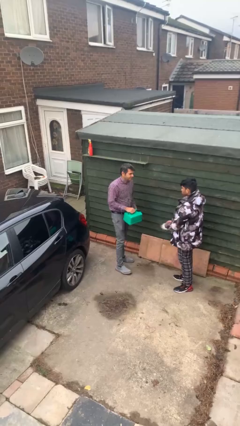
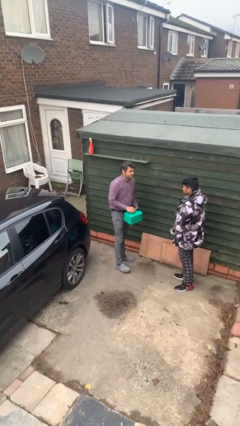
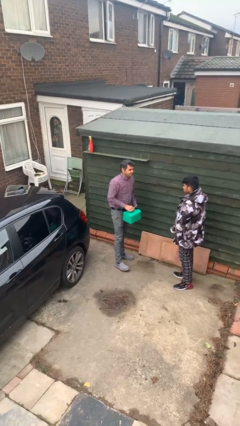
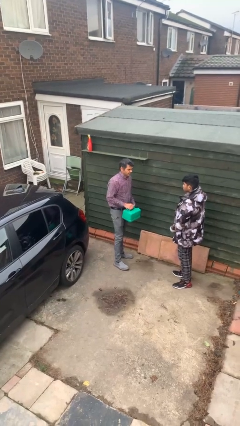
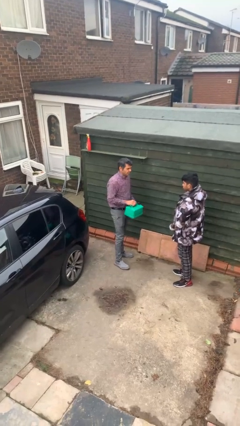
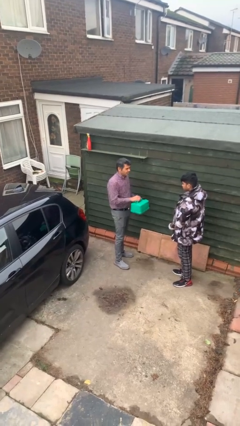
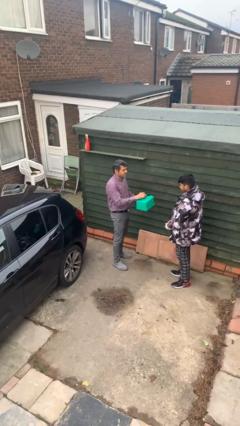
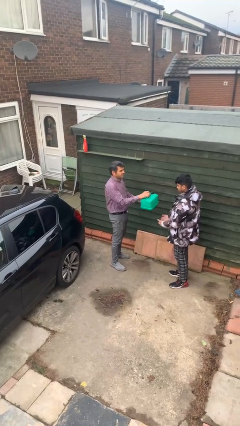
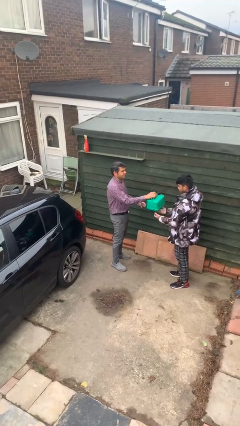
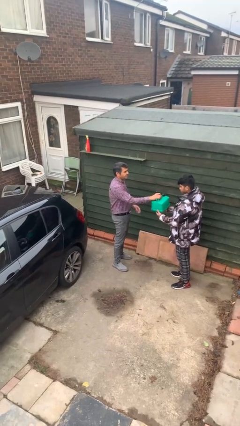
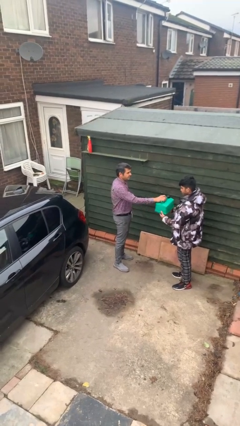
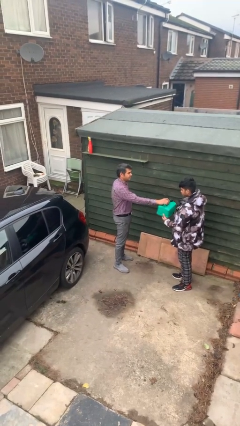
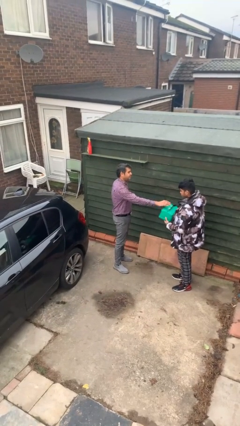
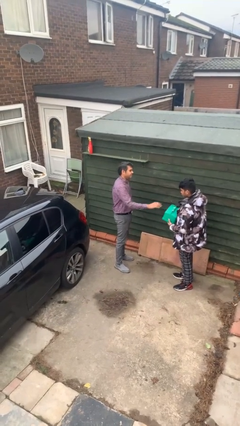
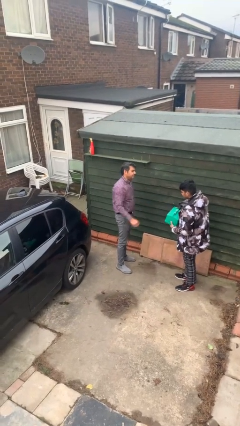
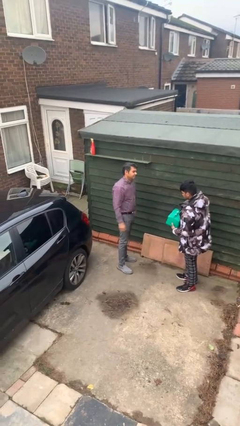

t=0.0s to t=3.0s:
person transfers object to person

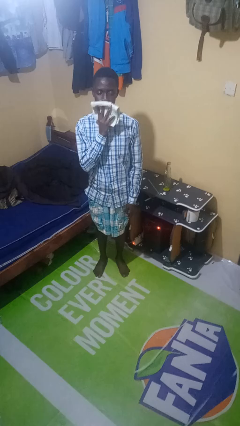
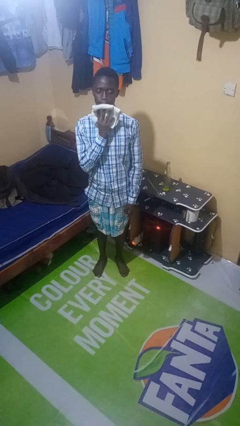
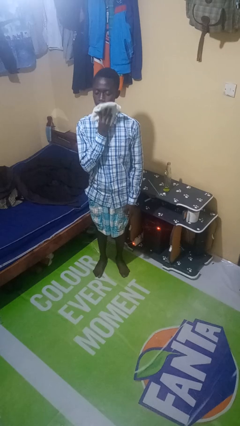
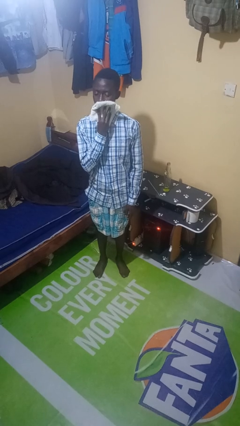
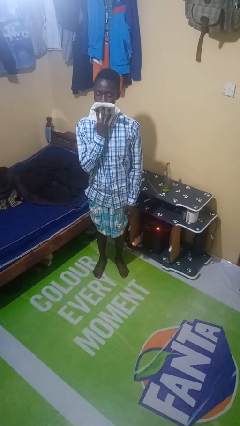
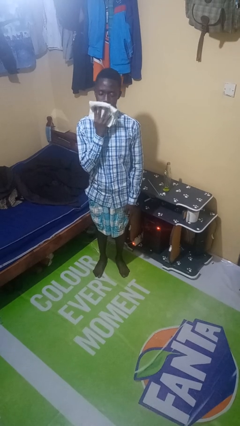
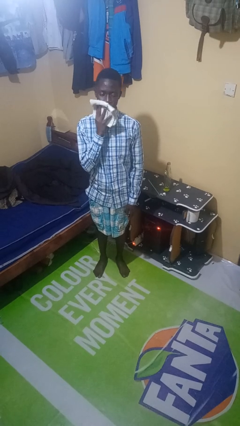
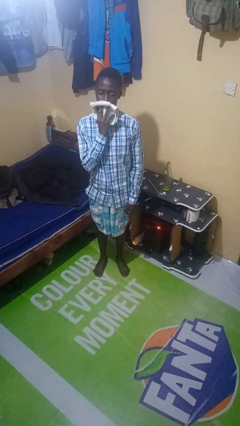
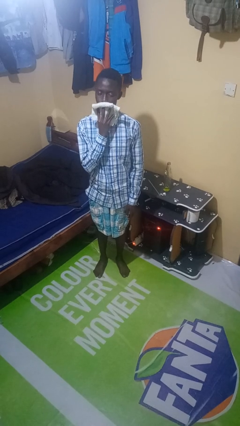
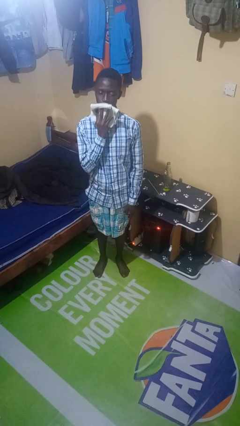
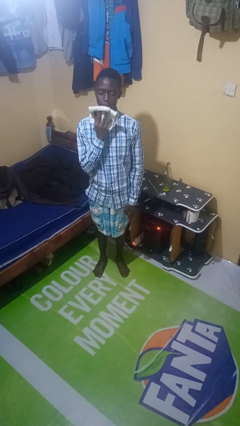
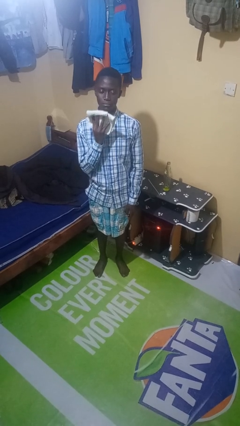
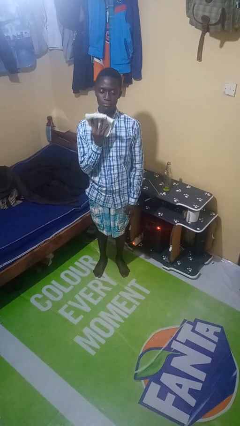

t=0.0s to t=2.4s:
person wipes mouth with napkin

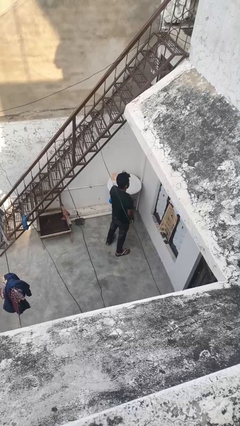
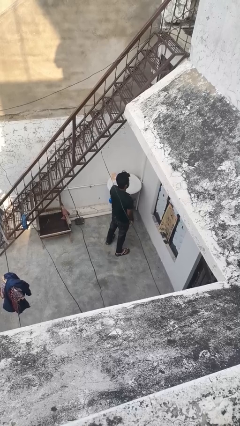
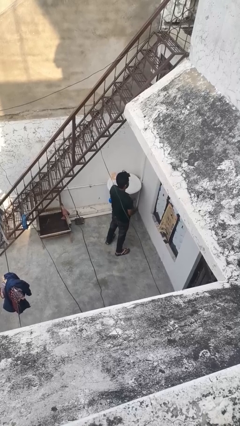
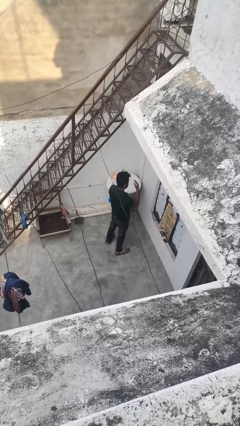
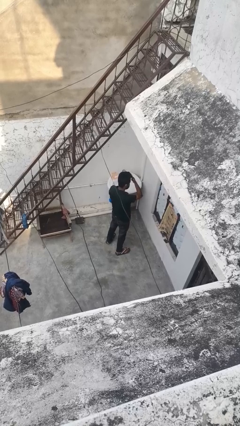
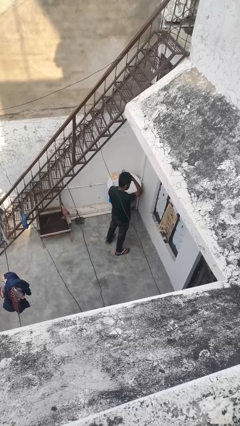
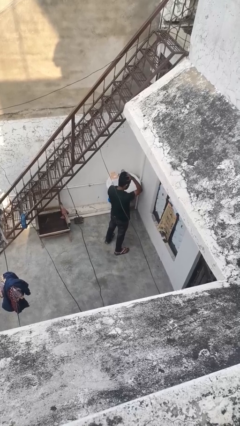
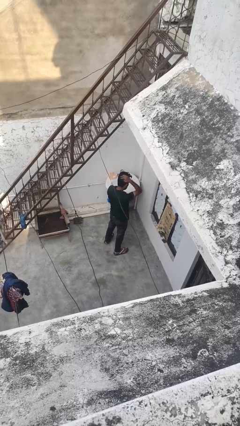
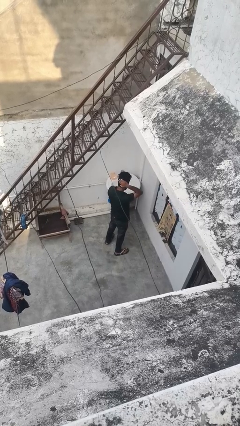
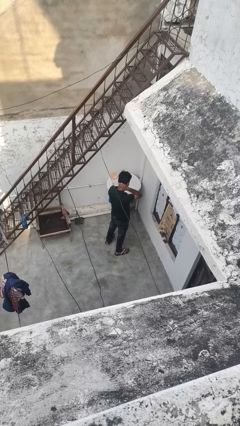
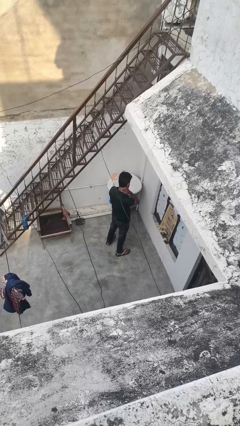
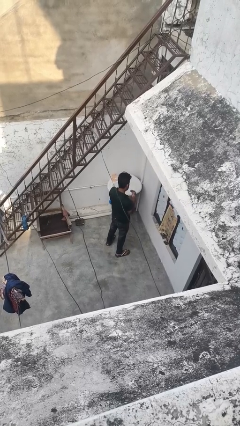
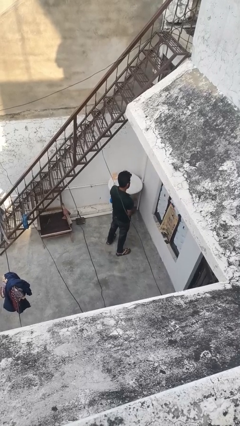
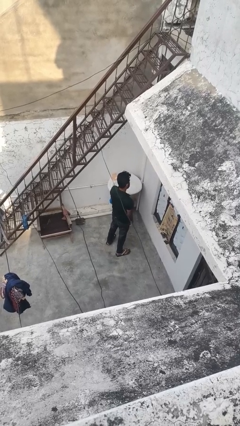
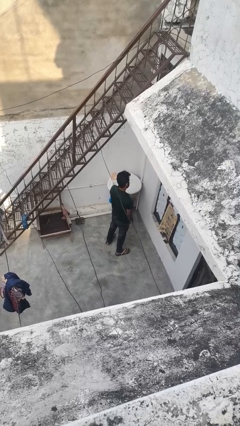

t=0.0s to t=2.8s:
person strokes hair

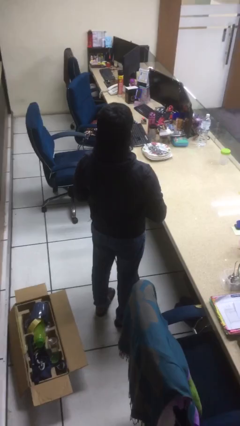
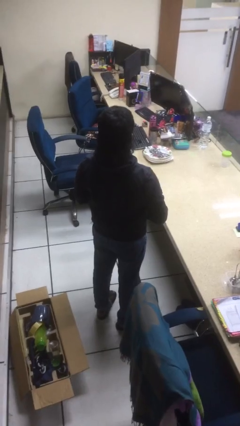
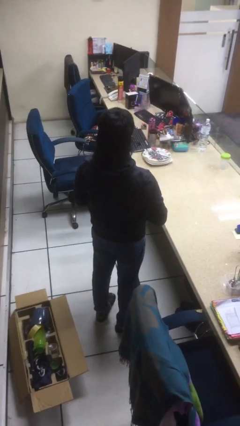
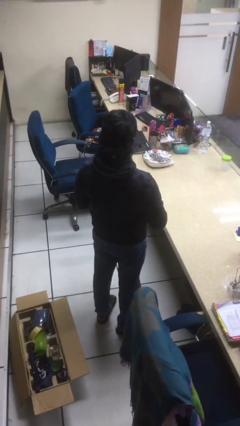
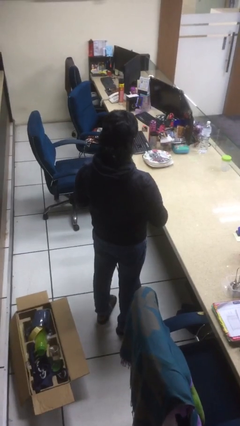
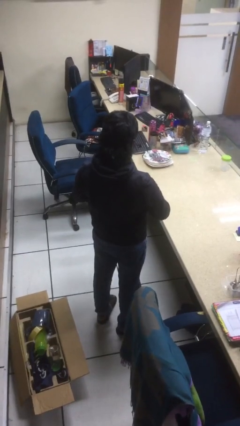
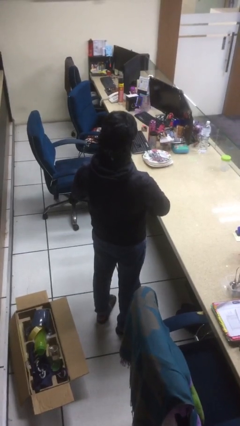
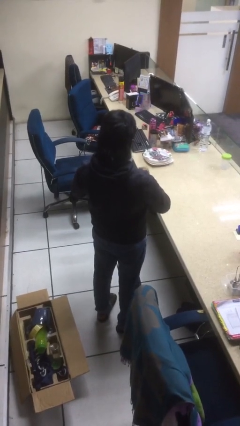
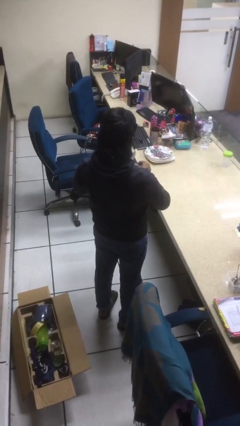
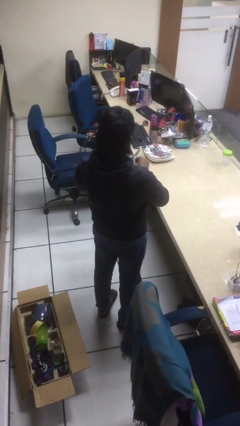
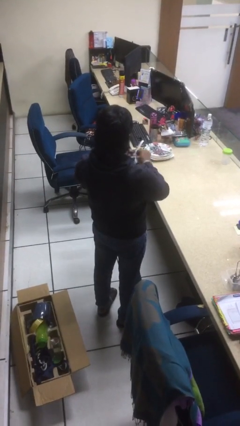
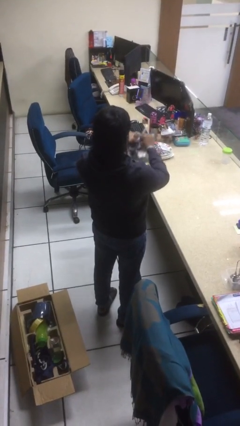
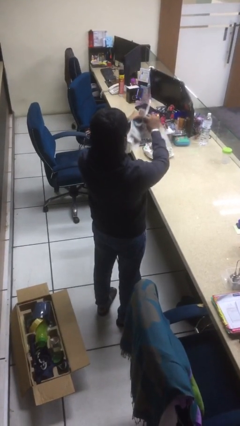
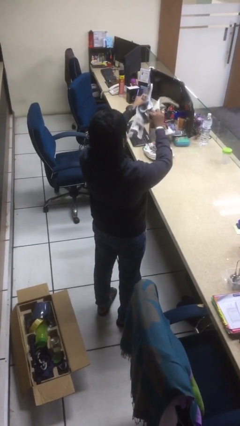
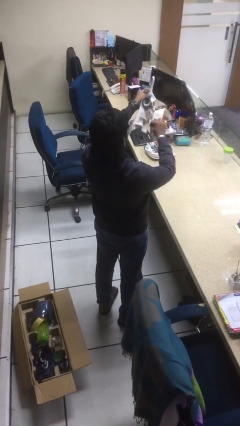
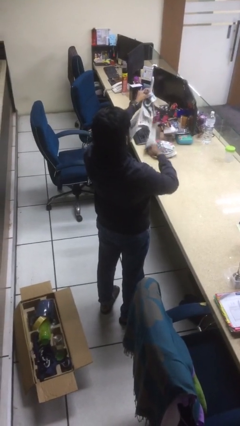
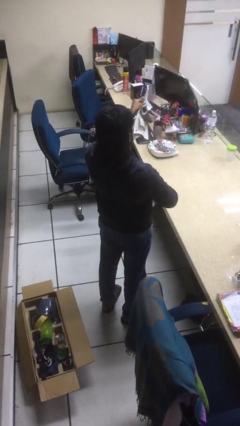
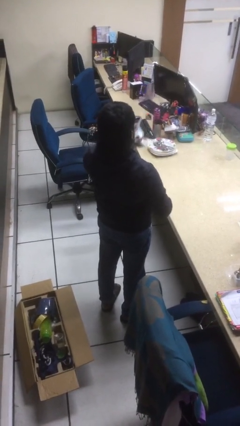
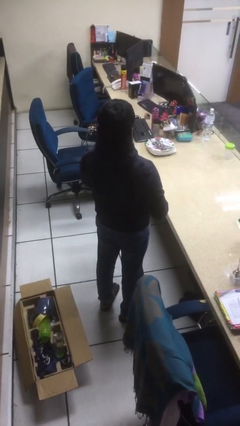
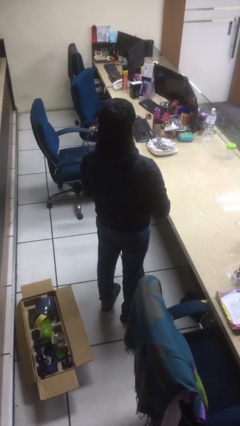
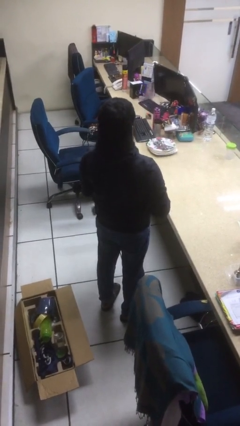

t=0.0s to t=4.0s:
person tears paper

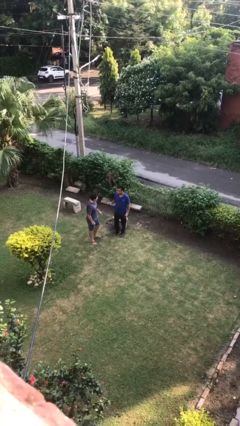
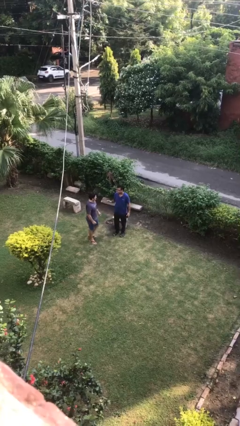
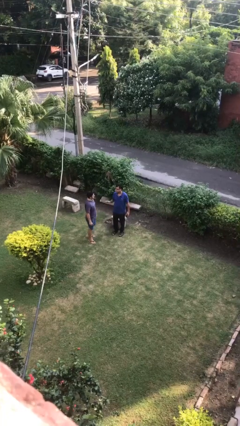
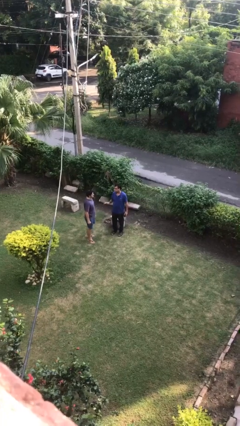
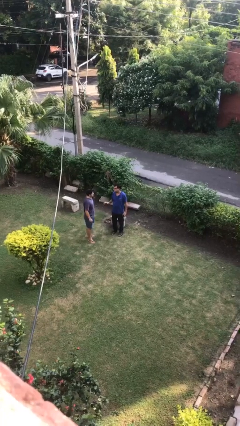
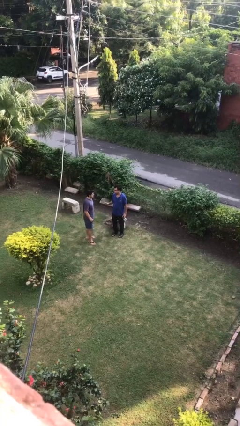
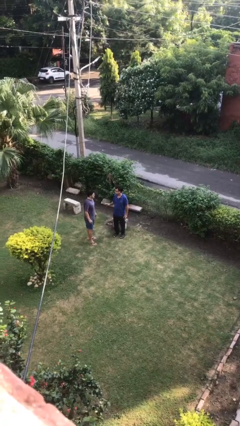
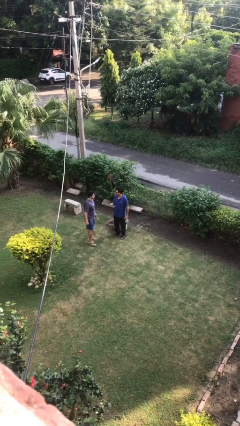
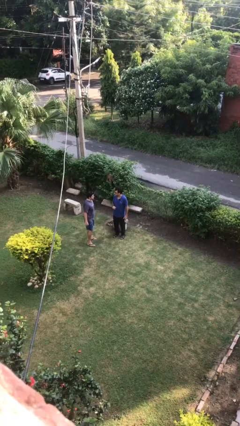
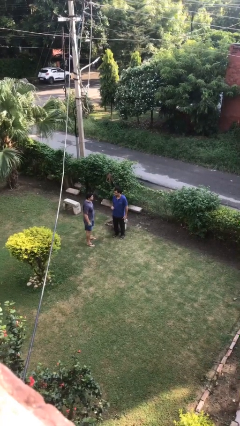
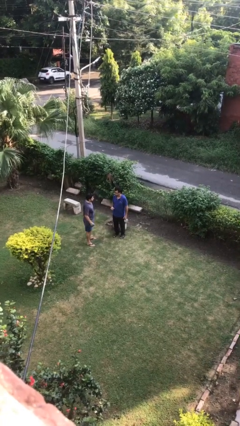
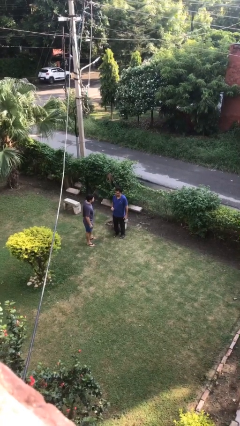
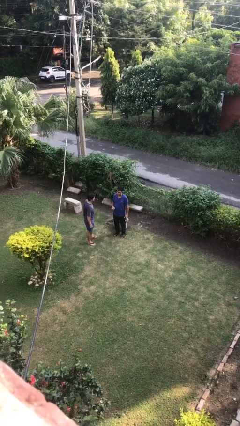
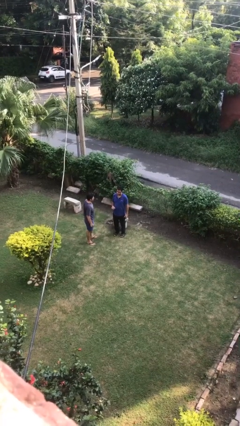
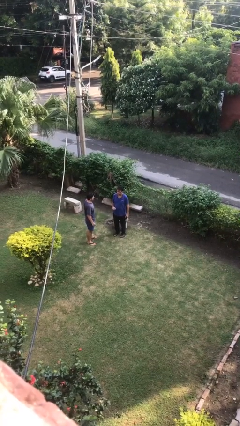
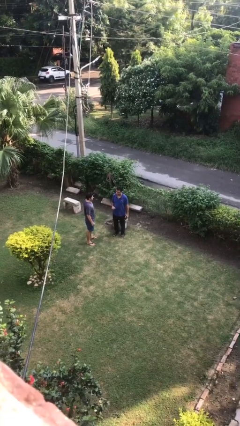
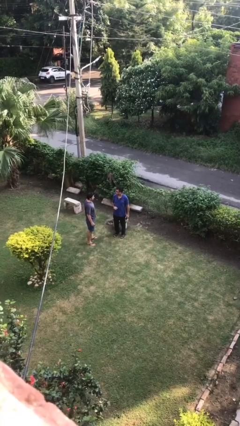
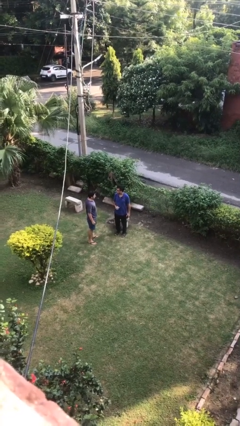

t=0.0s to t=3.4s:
person talks to person

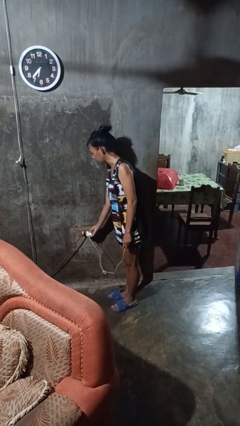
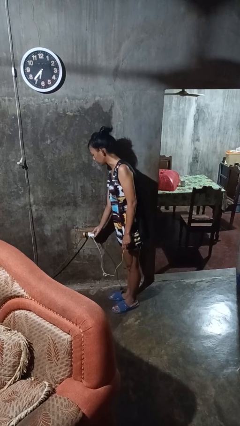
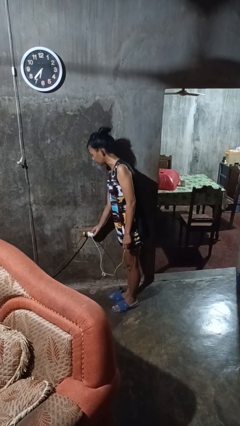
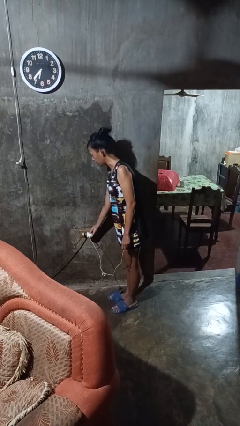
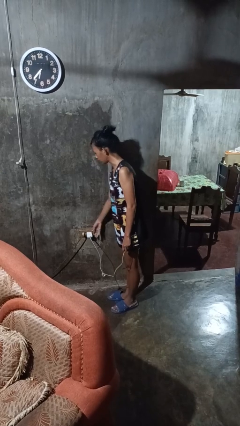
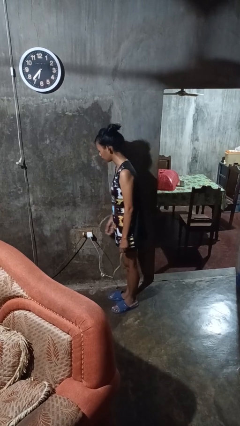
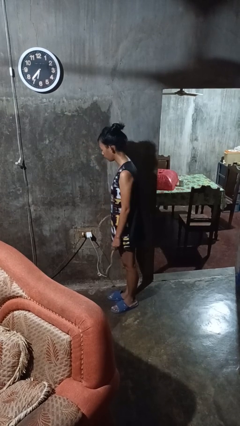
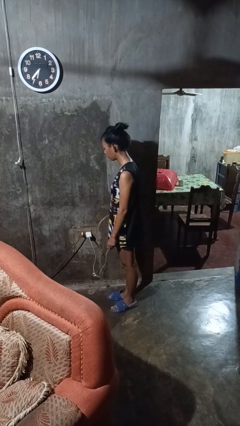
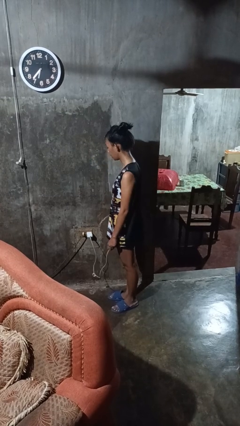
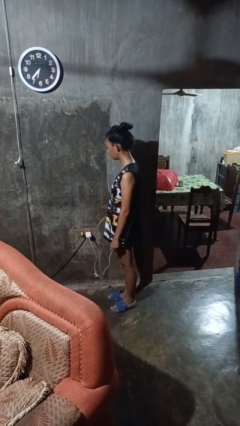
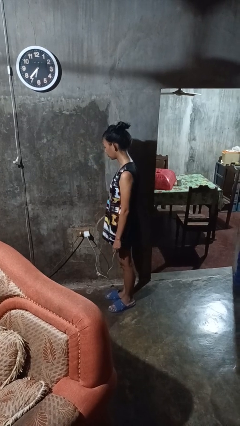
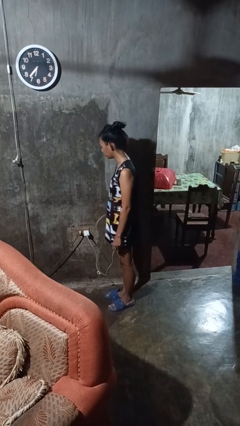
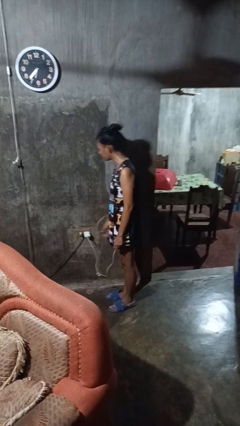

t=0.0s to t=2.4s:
person plugs into electrical socket
